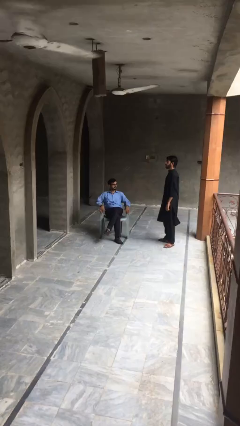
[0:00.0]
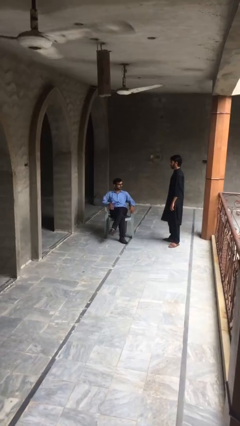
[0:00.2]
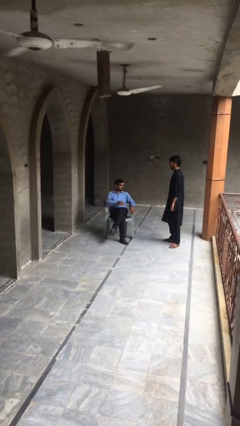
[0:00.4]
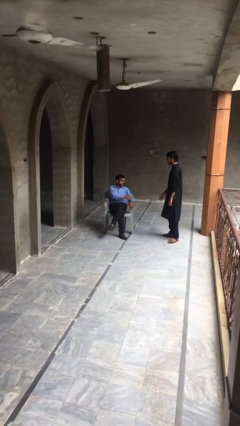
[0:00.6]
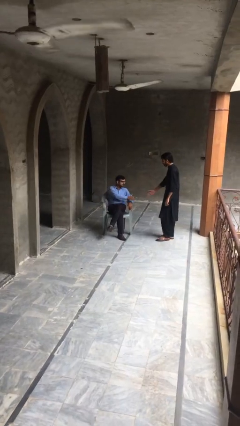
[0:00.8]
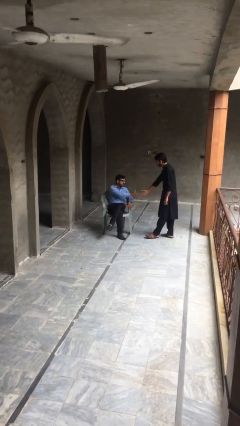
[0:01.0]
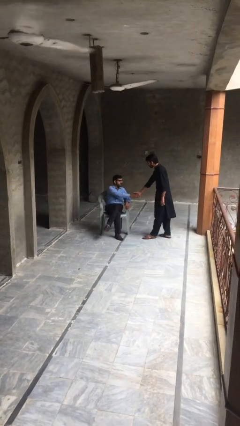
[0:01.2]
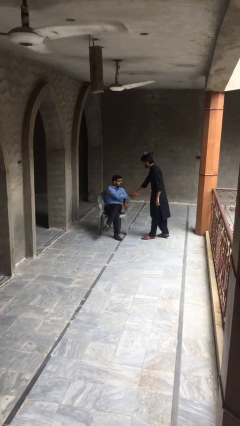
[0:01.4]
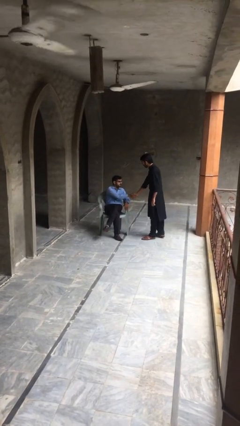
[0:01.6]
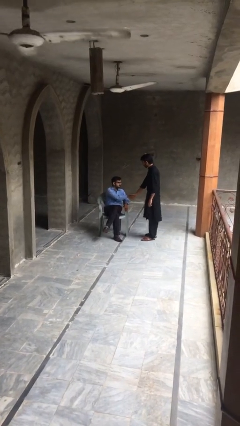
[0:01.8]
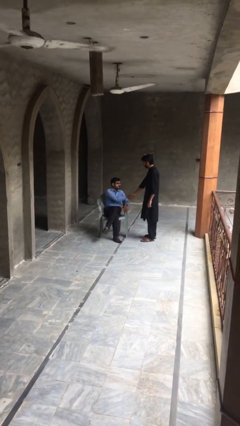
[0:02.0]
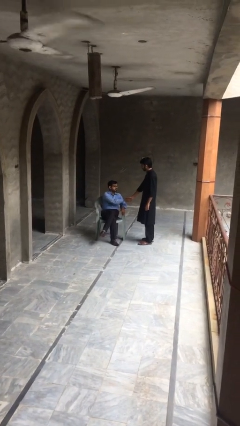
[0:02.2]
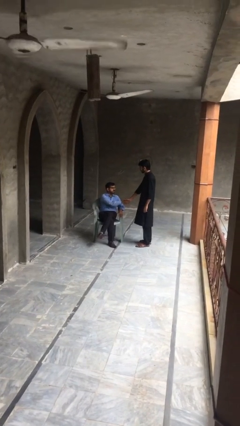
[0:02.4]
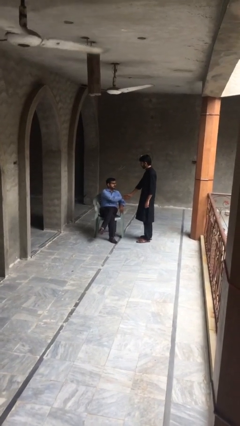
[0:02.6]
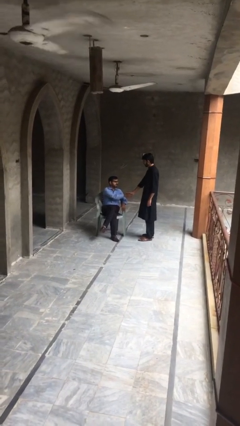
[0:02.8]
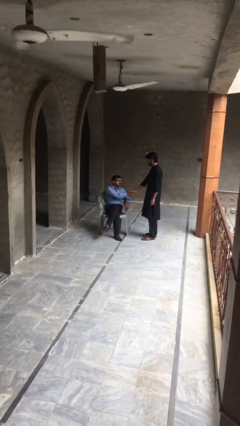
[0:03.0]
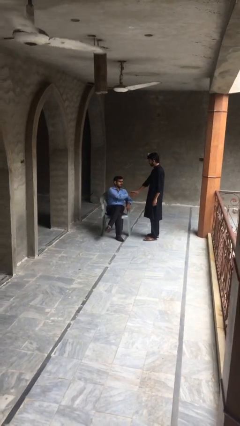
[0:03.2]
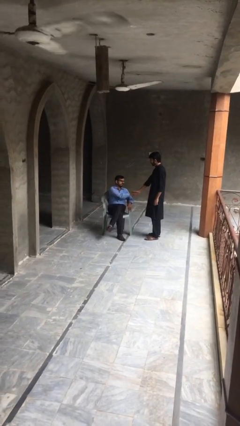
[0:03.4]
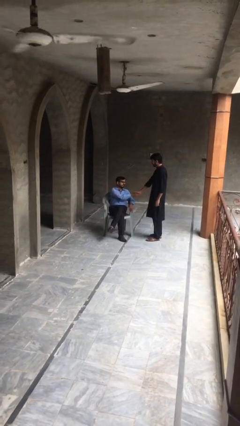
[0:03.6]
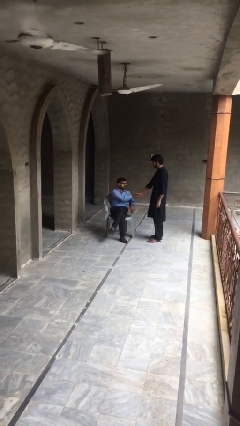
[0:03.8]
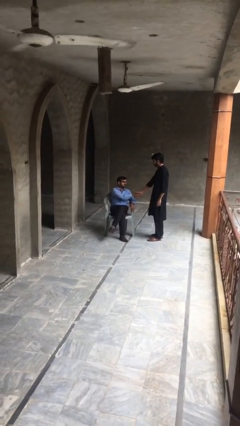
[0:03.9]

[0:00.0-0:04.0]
person shakes hand

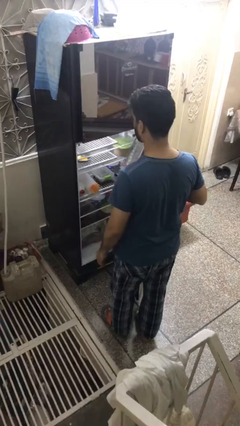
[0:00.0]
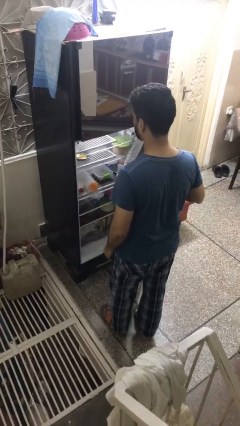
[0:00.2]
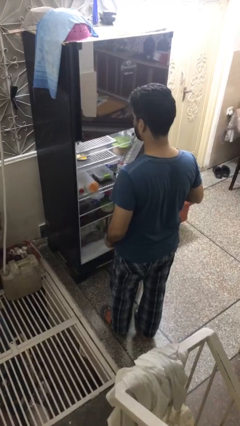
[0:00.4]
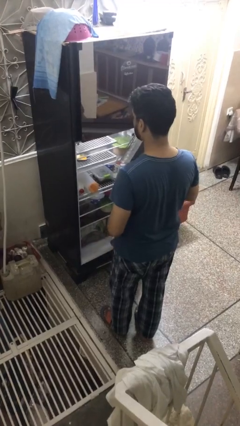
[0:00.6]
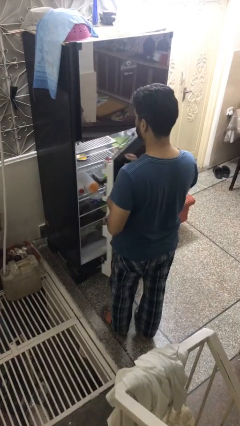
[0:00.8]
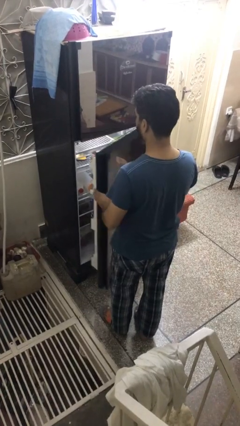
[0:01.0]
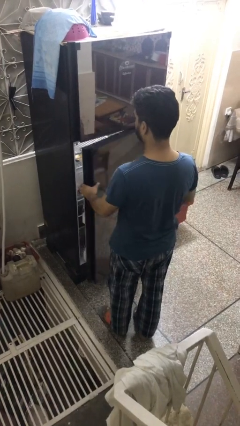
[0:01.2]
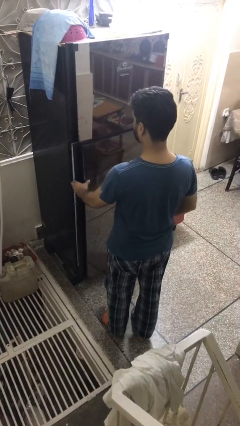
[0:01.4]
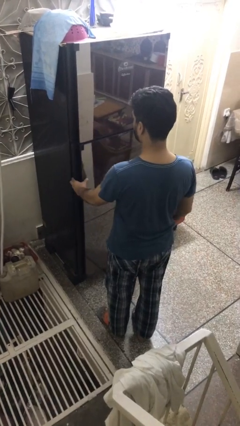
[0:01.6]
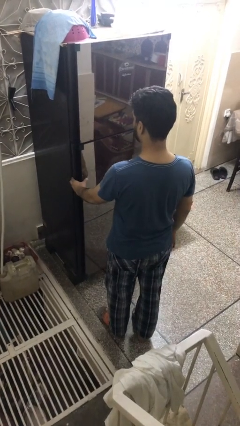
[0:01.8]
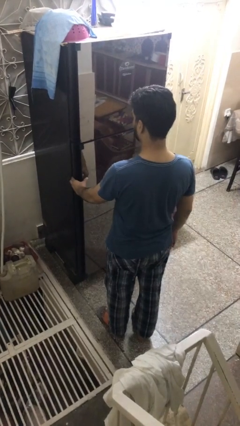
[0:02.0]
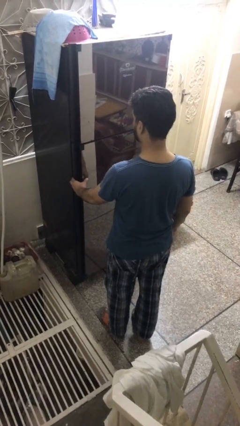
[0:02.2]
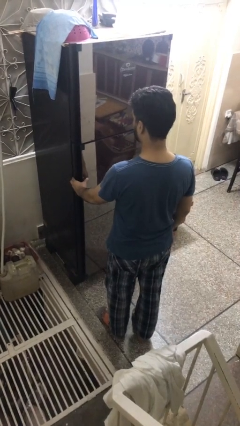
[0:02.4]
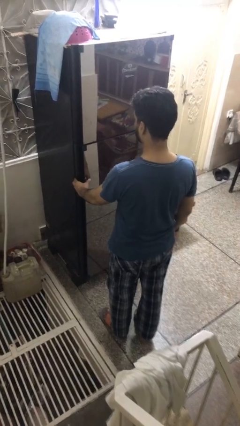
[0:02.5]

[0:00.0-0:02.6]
person closes refrigerator

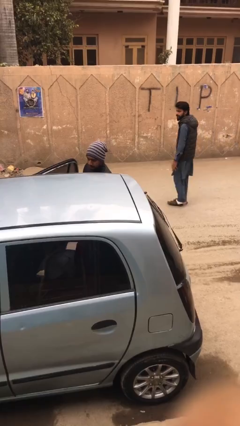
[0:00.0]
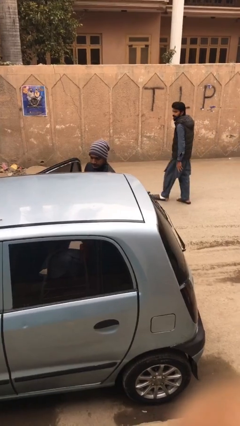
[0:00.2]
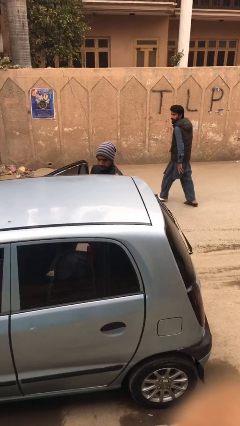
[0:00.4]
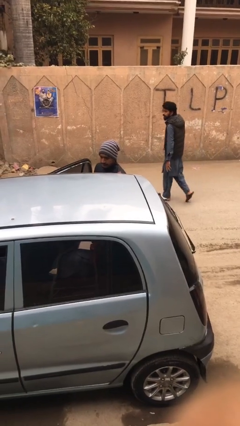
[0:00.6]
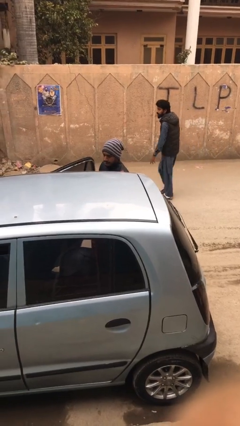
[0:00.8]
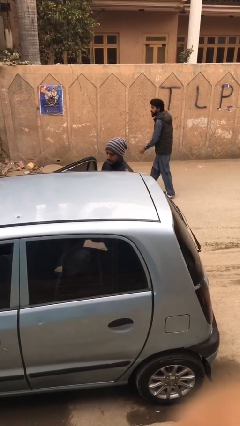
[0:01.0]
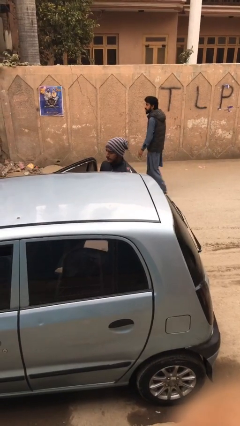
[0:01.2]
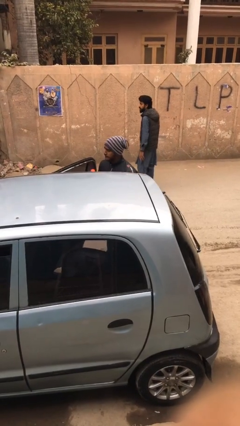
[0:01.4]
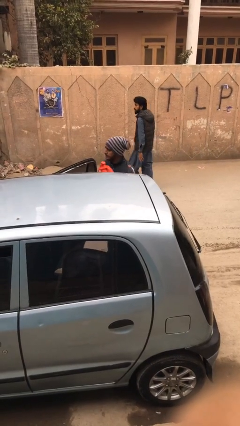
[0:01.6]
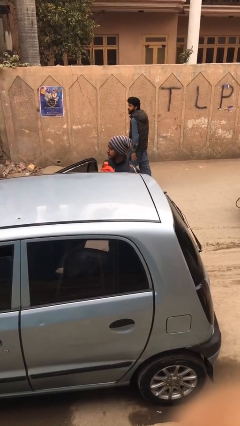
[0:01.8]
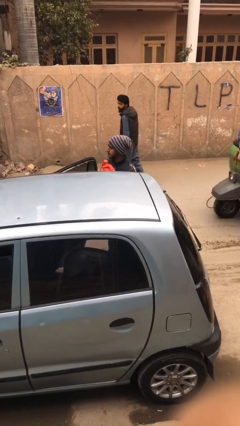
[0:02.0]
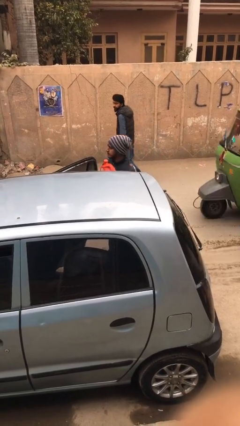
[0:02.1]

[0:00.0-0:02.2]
person unloads car

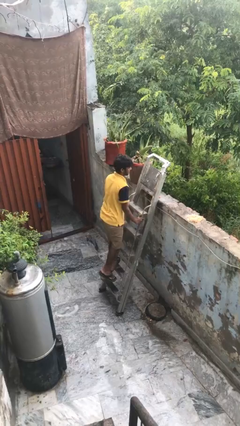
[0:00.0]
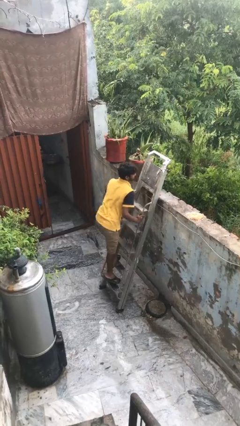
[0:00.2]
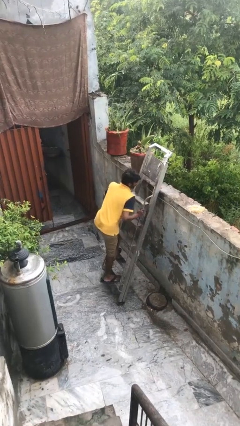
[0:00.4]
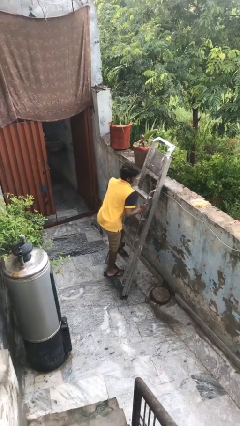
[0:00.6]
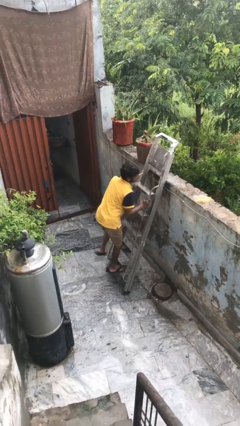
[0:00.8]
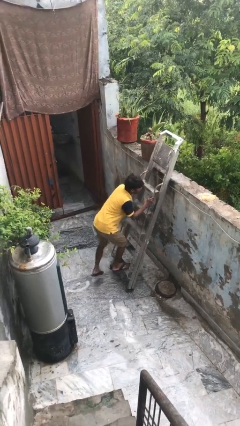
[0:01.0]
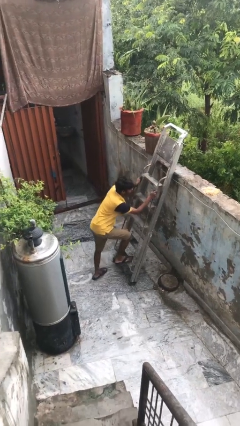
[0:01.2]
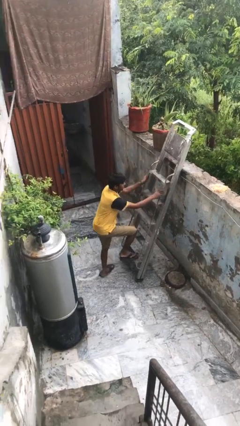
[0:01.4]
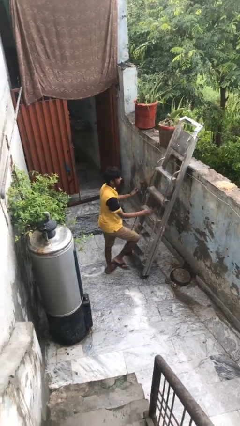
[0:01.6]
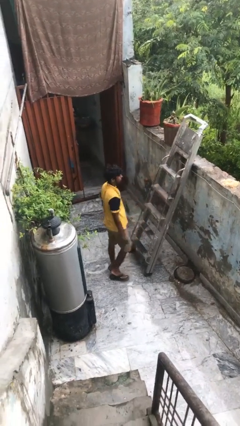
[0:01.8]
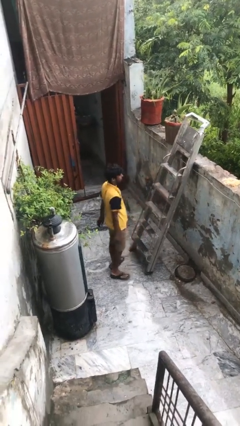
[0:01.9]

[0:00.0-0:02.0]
person climbs down ladder

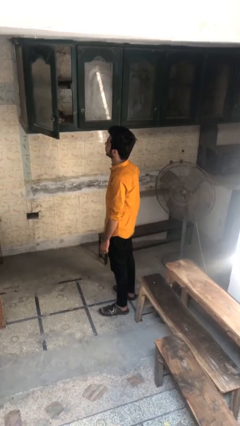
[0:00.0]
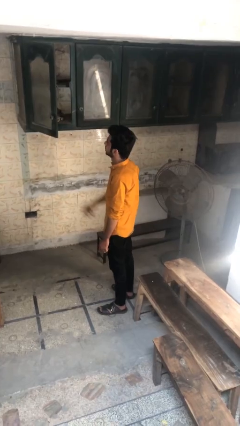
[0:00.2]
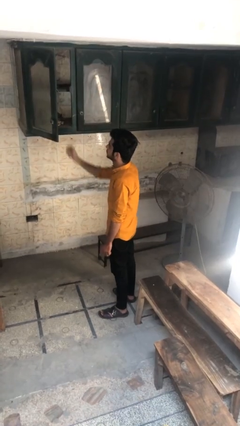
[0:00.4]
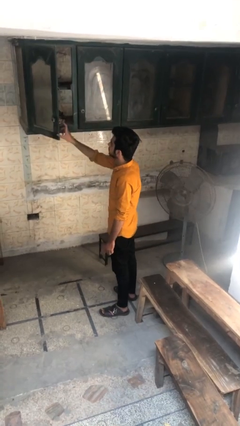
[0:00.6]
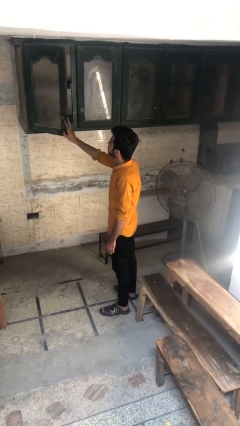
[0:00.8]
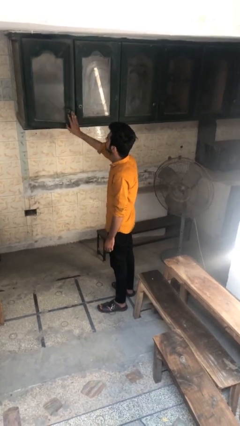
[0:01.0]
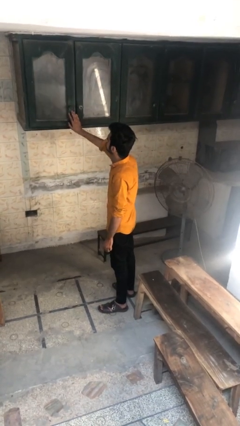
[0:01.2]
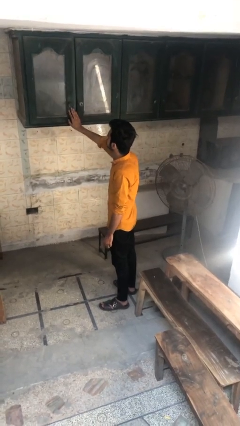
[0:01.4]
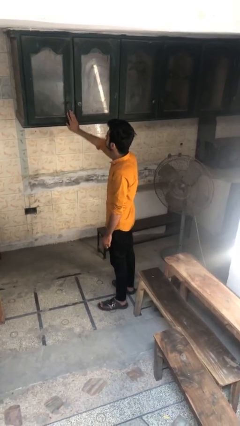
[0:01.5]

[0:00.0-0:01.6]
person closes cabinet

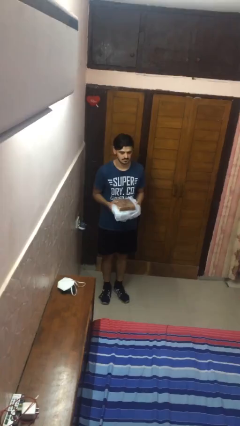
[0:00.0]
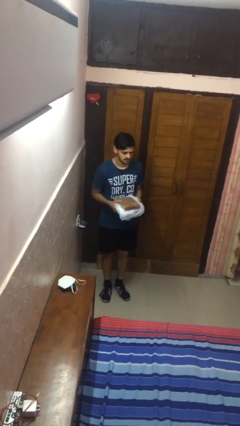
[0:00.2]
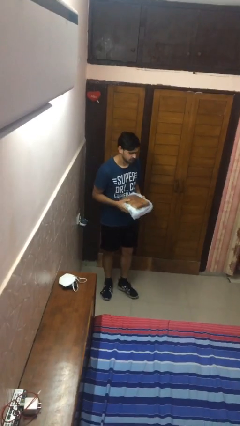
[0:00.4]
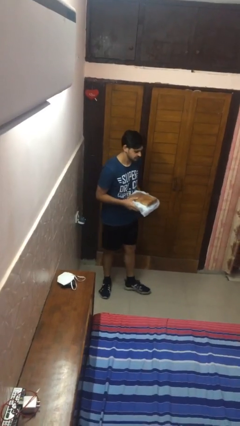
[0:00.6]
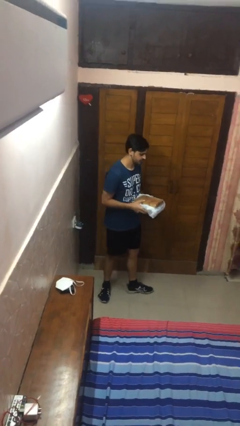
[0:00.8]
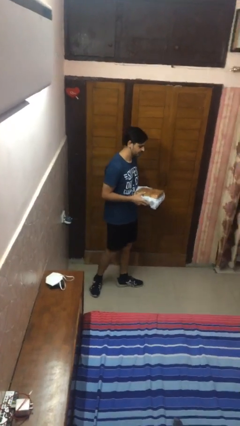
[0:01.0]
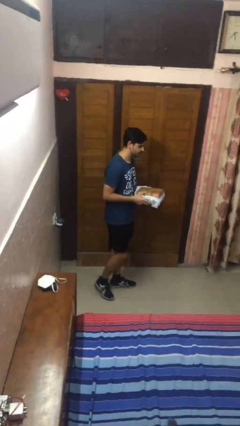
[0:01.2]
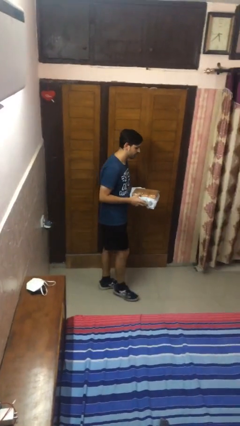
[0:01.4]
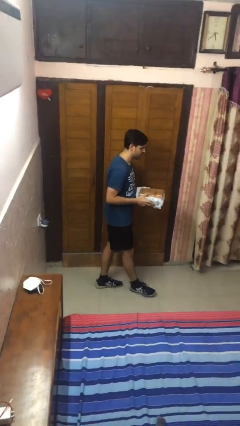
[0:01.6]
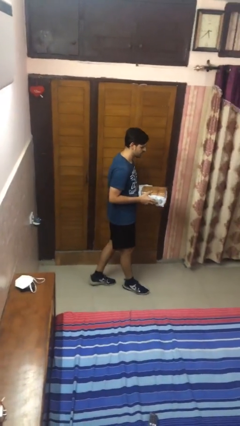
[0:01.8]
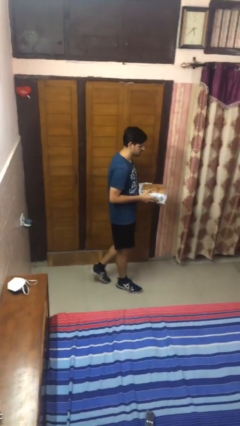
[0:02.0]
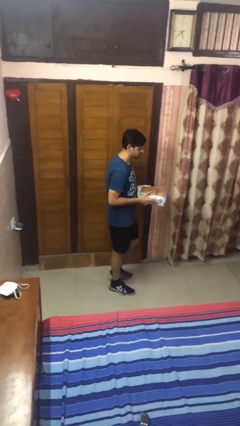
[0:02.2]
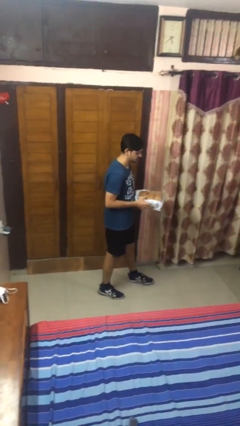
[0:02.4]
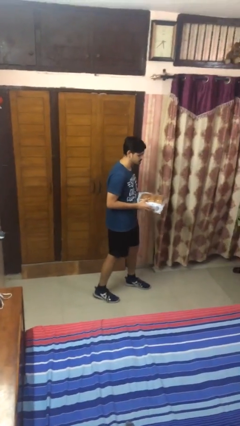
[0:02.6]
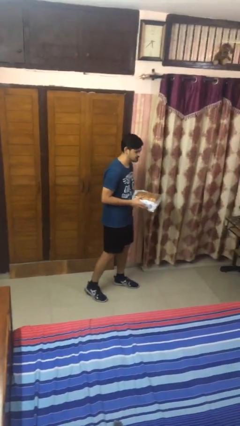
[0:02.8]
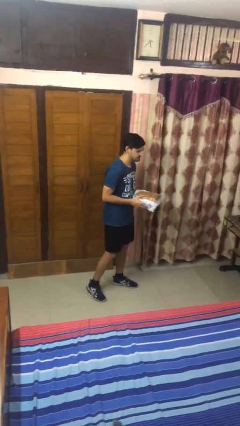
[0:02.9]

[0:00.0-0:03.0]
person carries groceries

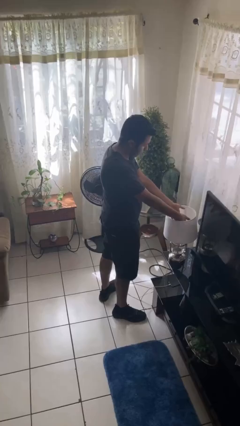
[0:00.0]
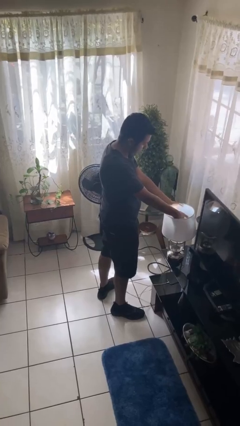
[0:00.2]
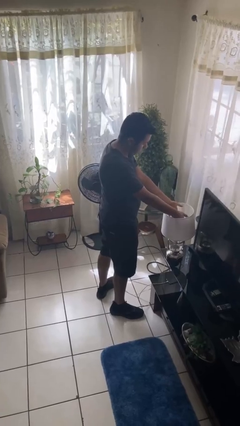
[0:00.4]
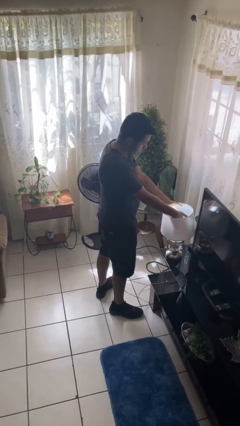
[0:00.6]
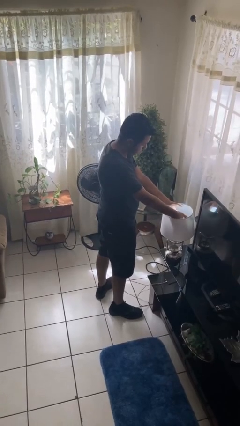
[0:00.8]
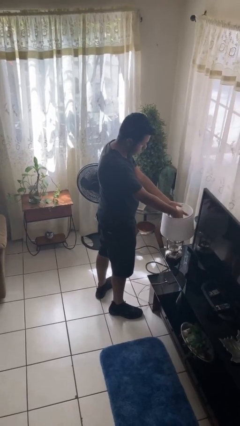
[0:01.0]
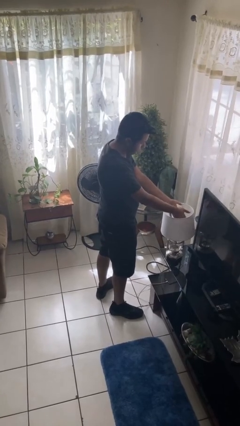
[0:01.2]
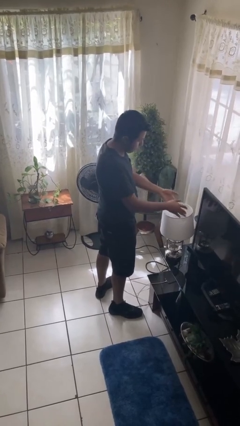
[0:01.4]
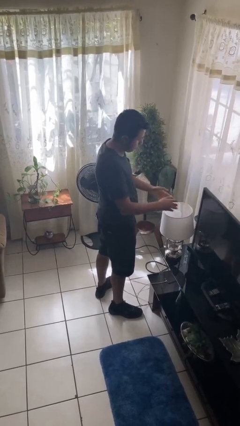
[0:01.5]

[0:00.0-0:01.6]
person turns off lamp
